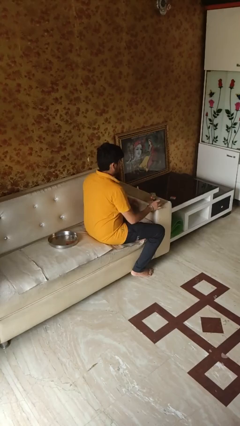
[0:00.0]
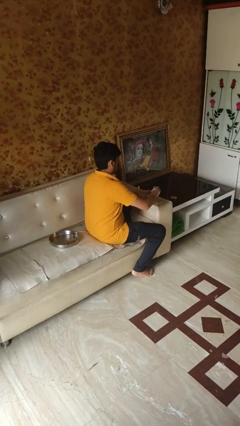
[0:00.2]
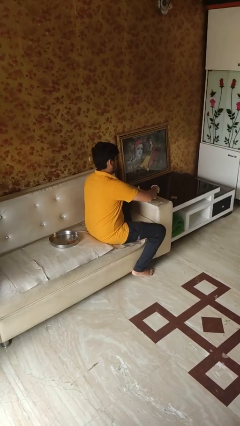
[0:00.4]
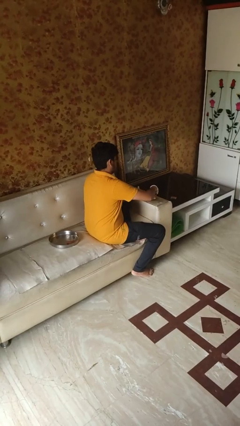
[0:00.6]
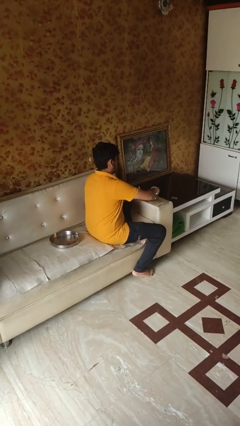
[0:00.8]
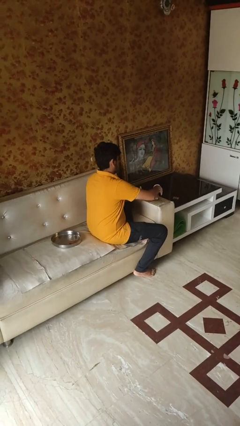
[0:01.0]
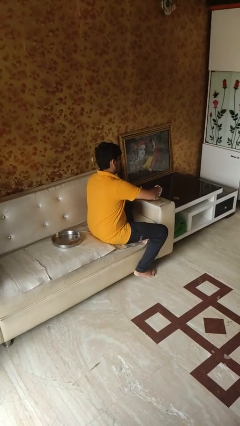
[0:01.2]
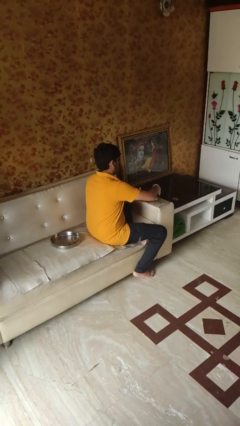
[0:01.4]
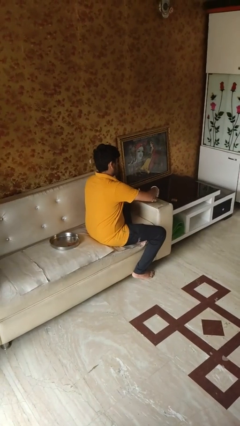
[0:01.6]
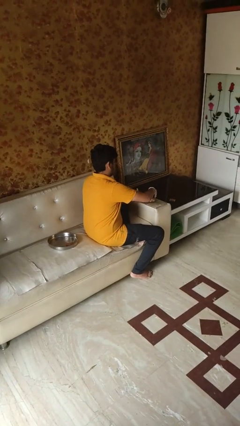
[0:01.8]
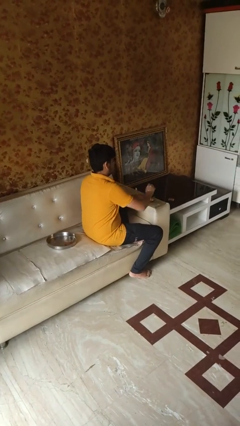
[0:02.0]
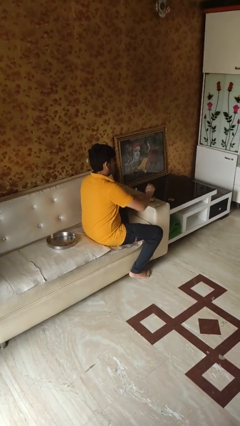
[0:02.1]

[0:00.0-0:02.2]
person closes jar

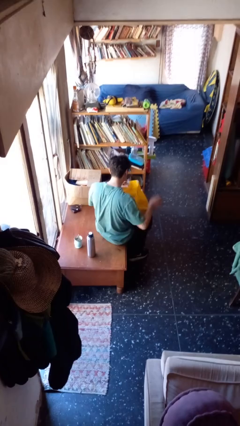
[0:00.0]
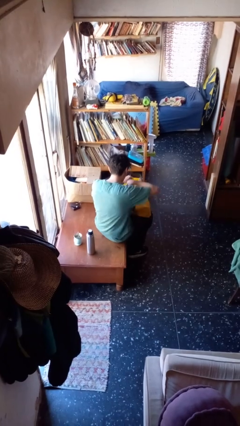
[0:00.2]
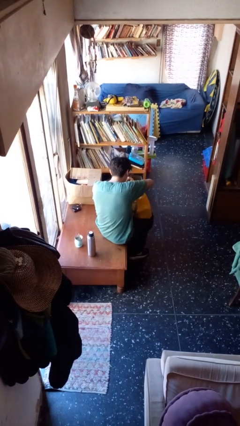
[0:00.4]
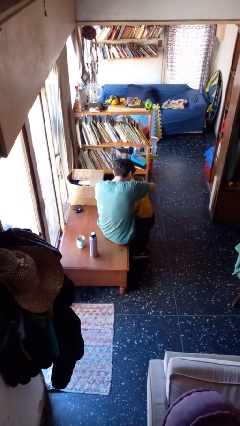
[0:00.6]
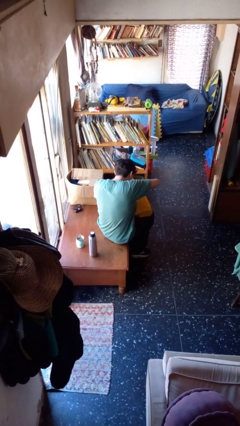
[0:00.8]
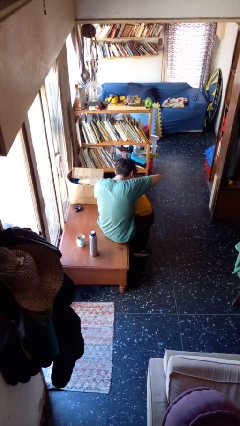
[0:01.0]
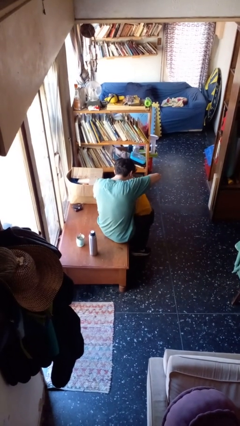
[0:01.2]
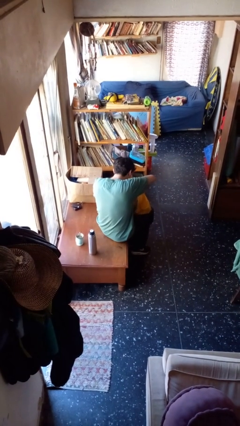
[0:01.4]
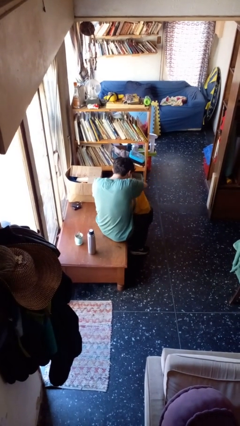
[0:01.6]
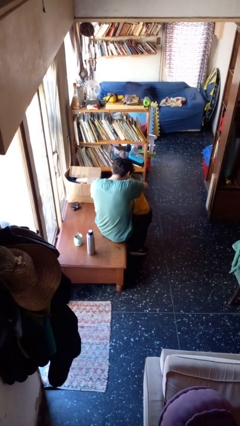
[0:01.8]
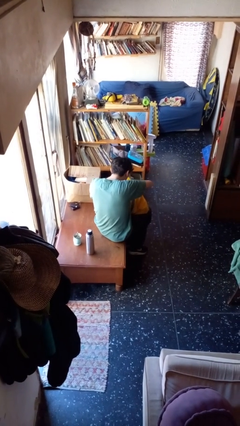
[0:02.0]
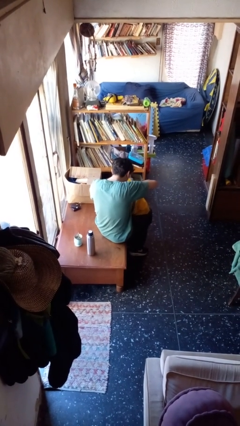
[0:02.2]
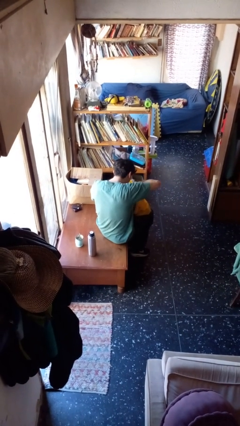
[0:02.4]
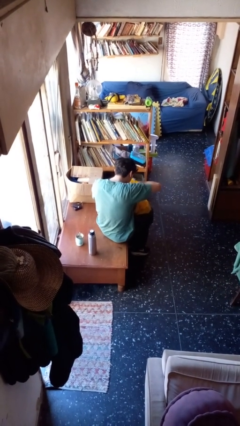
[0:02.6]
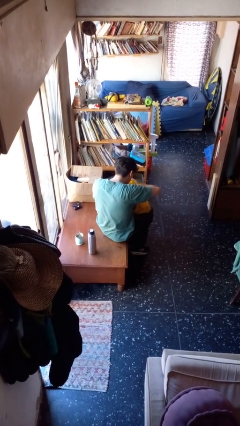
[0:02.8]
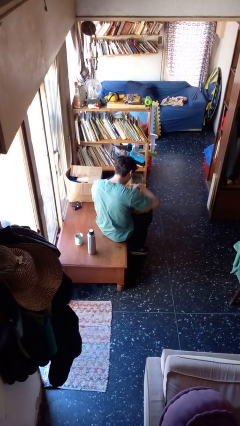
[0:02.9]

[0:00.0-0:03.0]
person searches in bag

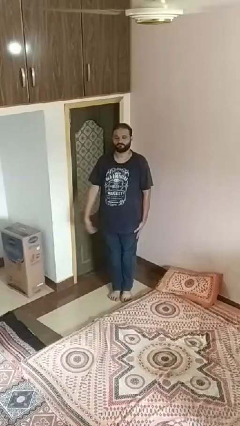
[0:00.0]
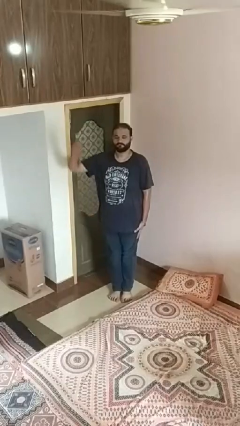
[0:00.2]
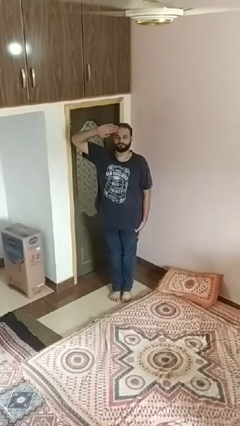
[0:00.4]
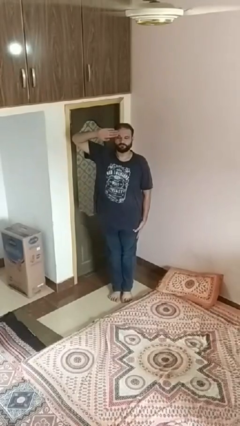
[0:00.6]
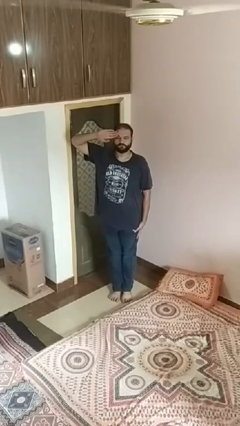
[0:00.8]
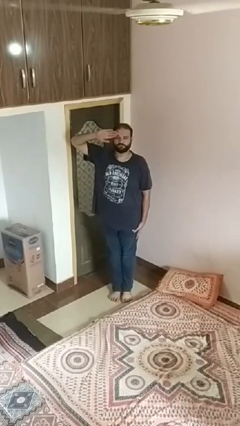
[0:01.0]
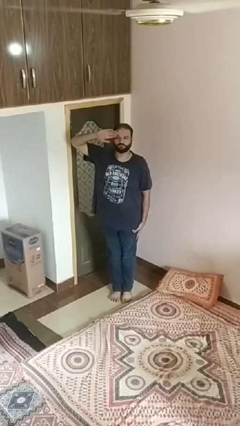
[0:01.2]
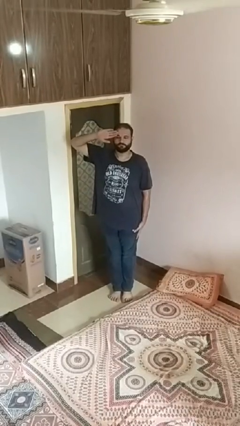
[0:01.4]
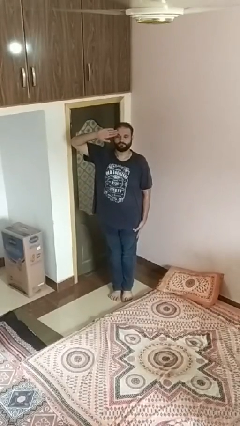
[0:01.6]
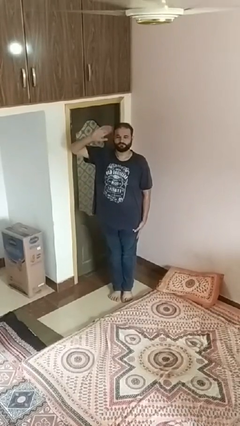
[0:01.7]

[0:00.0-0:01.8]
person salutes

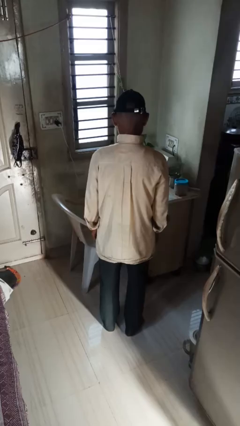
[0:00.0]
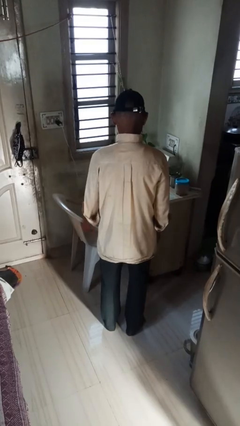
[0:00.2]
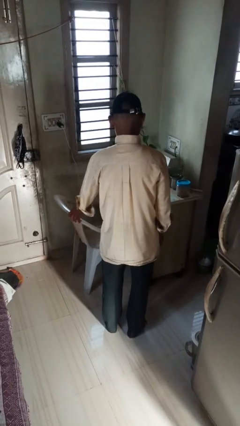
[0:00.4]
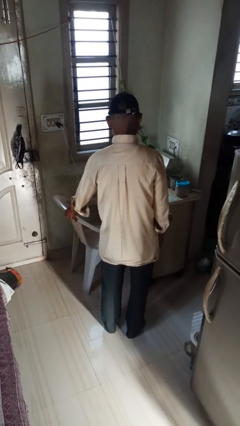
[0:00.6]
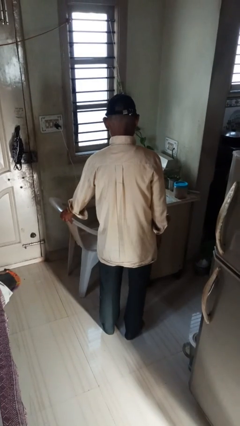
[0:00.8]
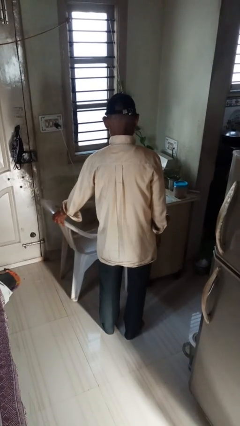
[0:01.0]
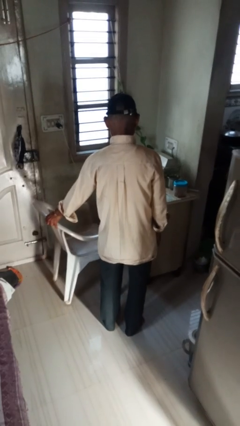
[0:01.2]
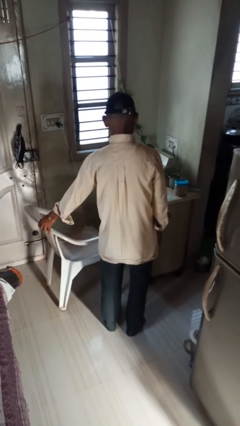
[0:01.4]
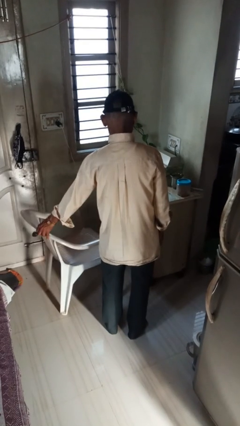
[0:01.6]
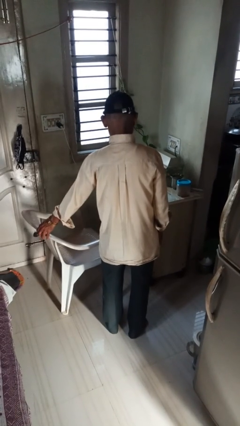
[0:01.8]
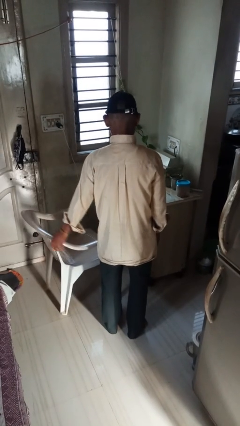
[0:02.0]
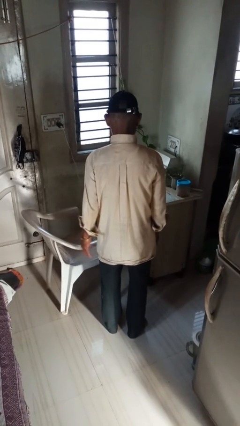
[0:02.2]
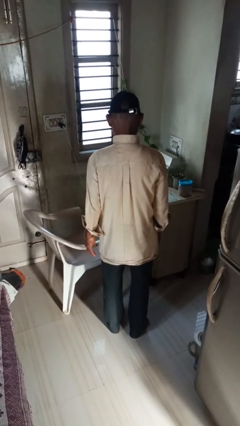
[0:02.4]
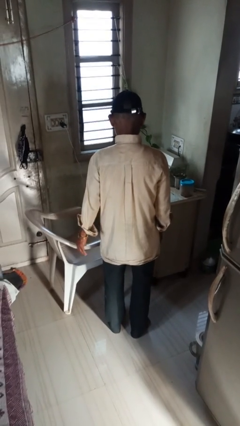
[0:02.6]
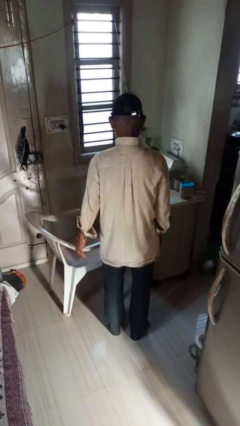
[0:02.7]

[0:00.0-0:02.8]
person pulls out chair

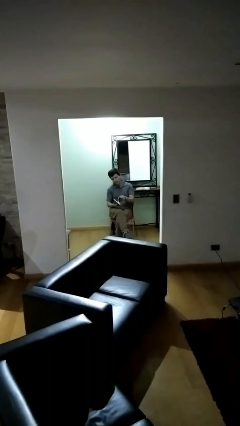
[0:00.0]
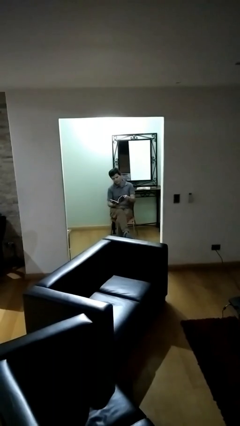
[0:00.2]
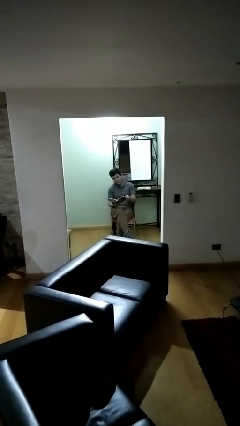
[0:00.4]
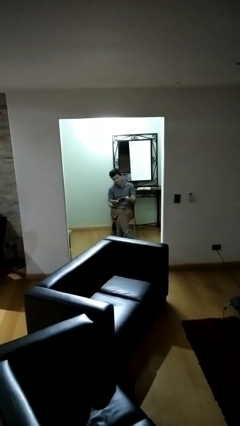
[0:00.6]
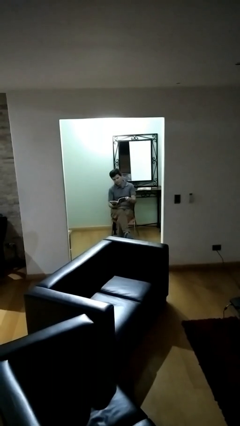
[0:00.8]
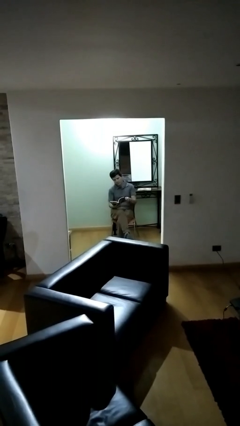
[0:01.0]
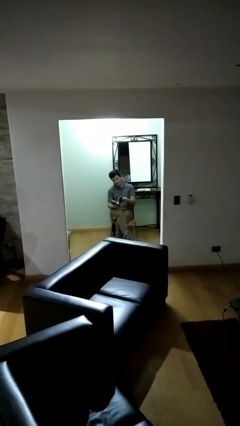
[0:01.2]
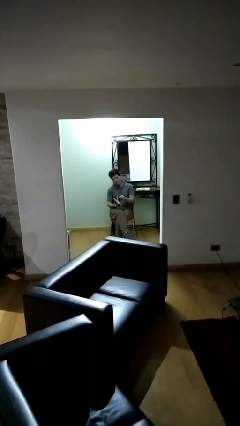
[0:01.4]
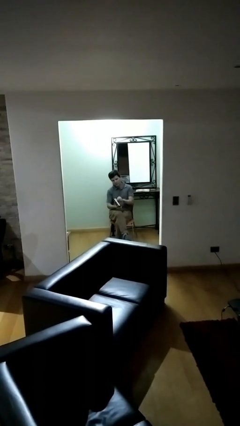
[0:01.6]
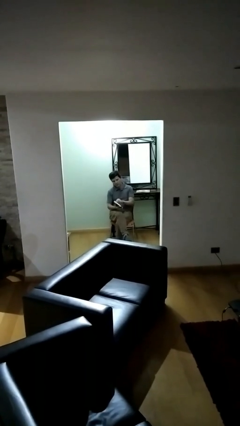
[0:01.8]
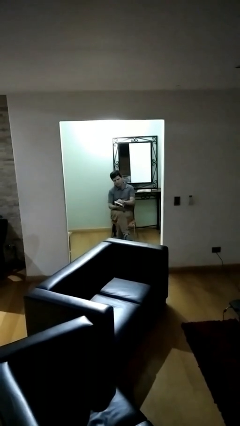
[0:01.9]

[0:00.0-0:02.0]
person reads document

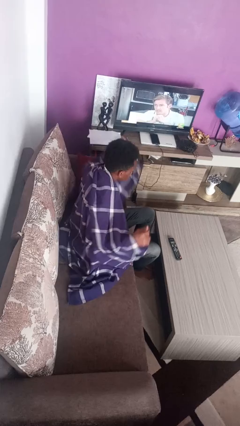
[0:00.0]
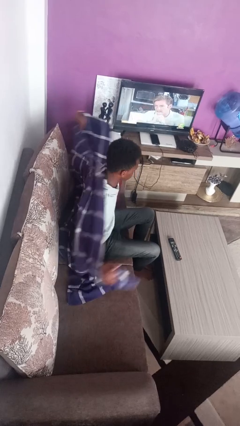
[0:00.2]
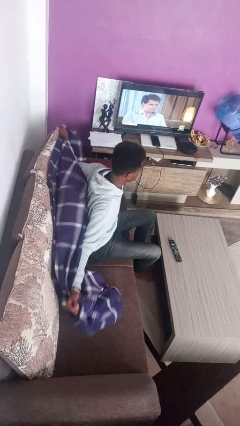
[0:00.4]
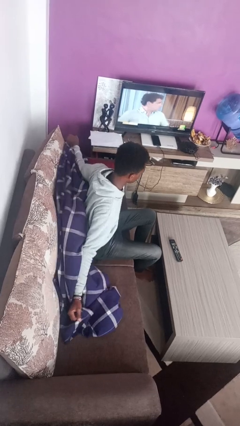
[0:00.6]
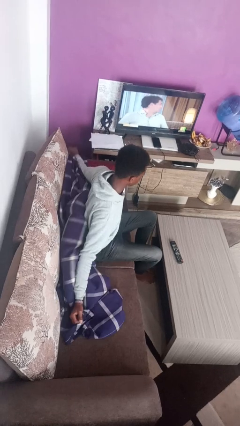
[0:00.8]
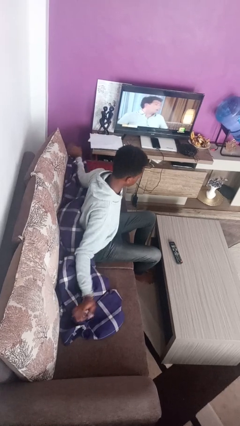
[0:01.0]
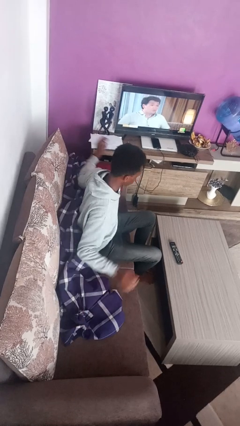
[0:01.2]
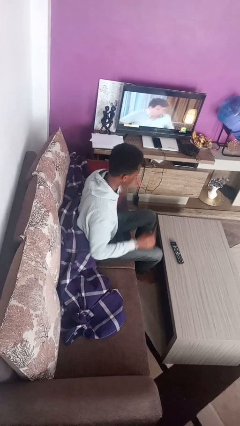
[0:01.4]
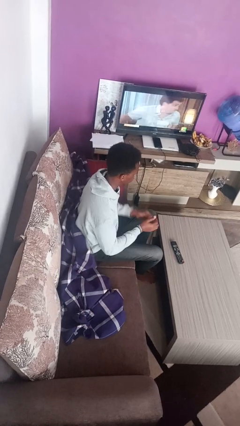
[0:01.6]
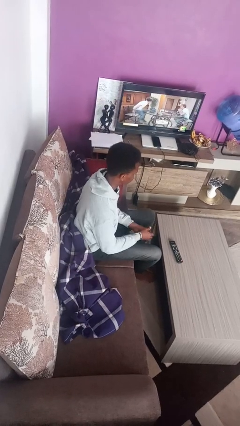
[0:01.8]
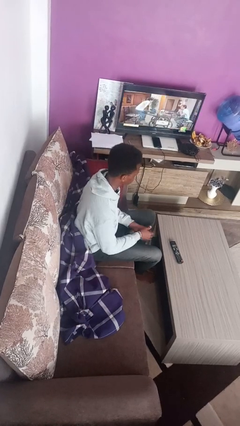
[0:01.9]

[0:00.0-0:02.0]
person uncovers with blanket

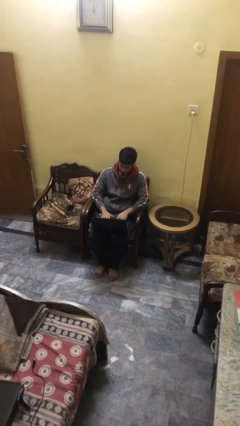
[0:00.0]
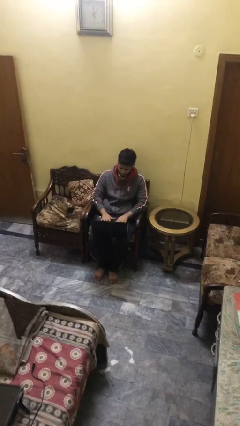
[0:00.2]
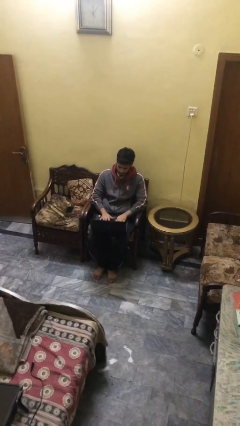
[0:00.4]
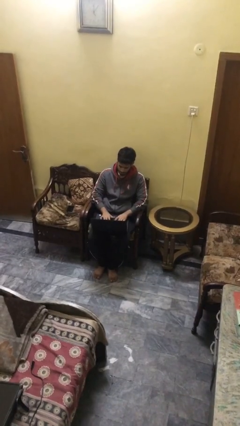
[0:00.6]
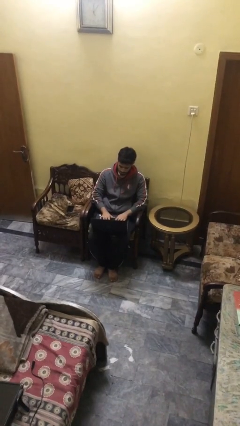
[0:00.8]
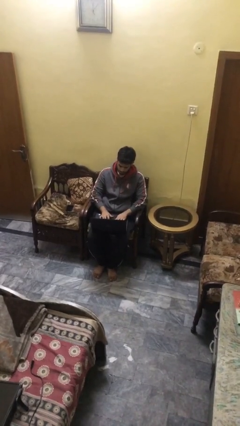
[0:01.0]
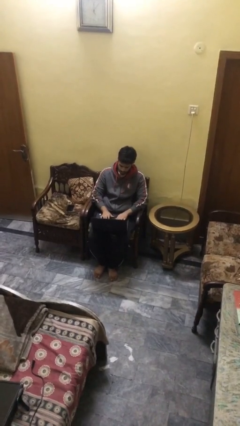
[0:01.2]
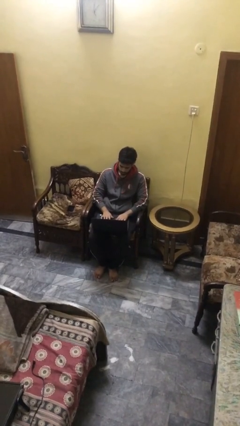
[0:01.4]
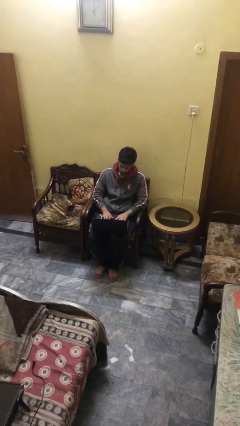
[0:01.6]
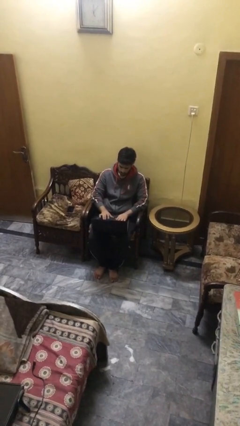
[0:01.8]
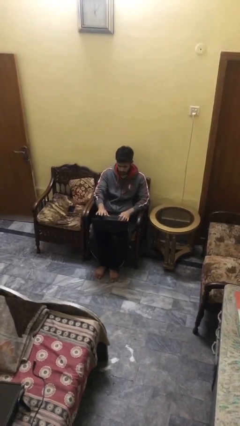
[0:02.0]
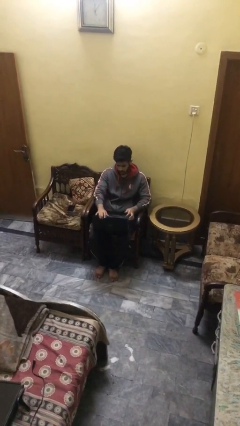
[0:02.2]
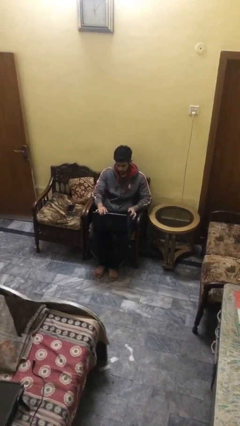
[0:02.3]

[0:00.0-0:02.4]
person interacts with laptop

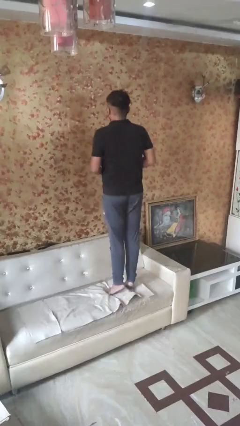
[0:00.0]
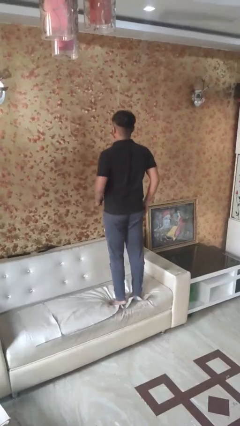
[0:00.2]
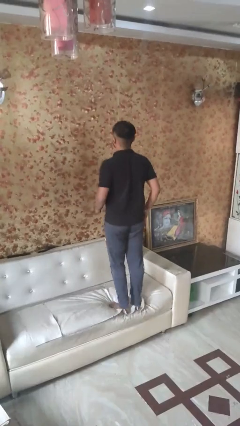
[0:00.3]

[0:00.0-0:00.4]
person jumps on bed

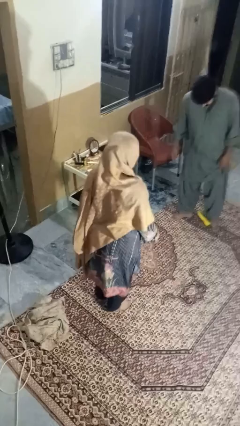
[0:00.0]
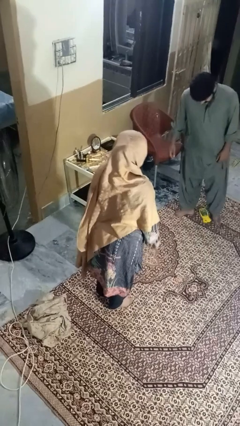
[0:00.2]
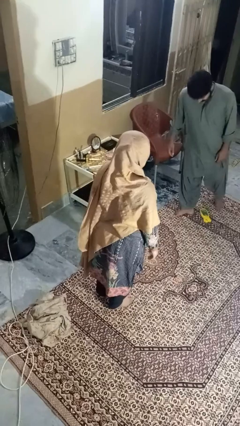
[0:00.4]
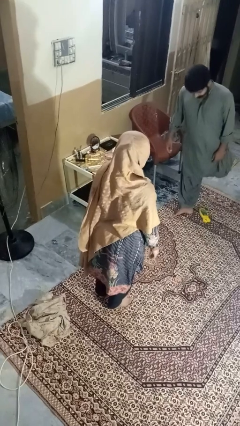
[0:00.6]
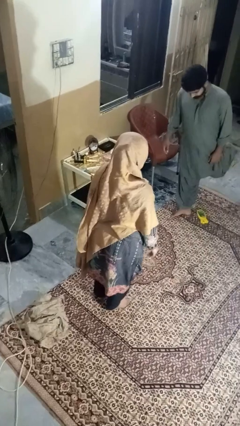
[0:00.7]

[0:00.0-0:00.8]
person kicks object to person
